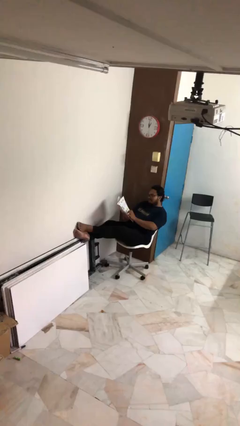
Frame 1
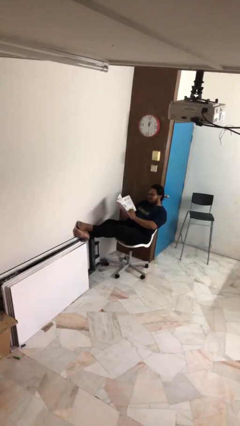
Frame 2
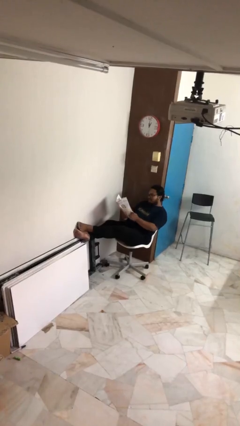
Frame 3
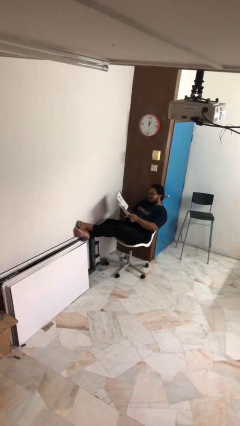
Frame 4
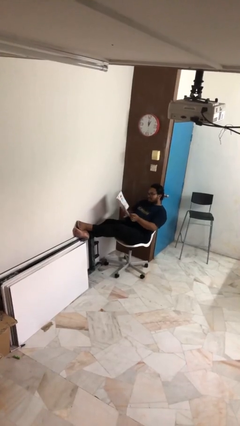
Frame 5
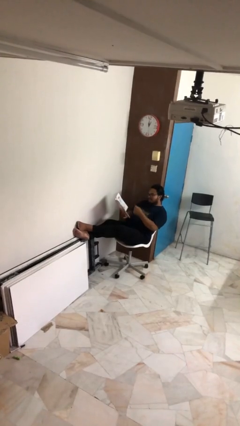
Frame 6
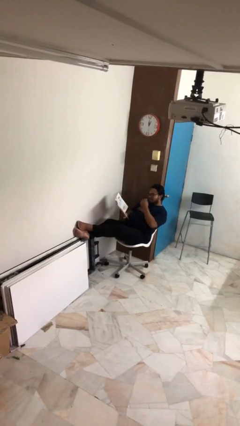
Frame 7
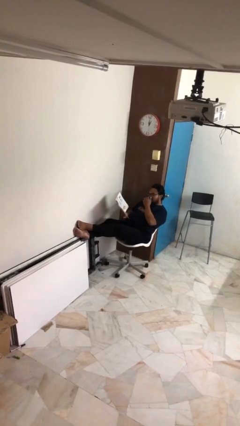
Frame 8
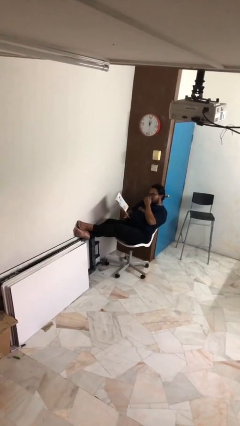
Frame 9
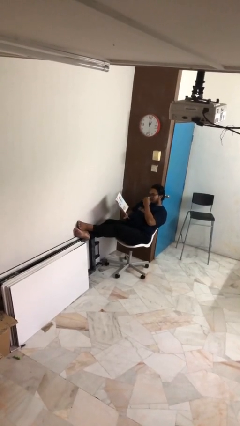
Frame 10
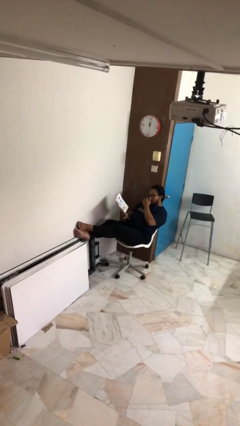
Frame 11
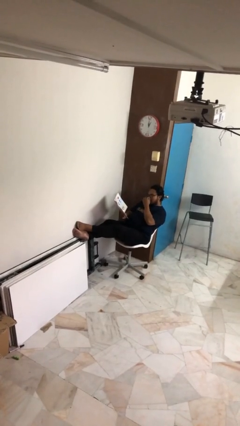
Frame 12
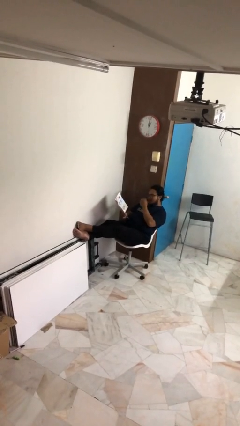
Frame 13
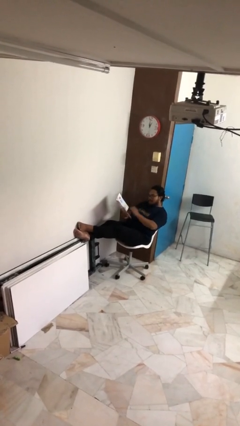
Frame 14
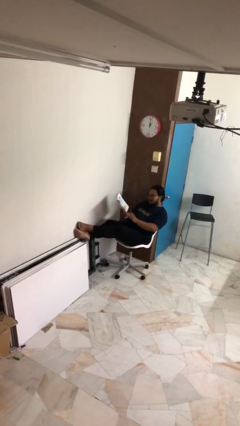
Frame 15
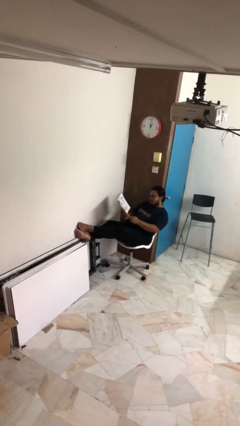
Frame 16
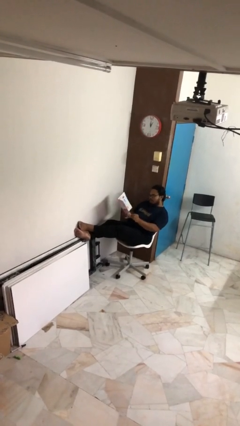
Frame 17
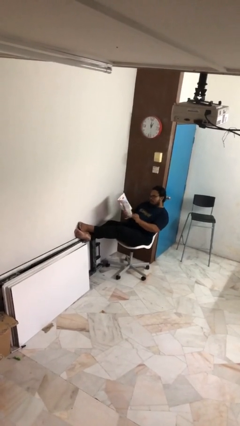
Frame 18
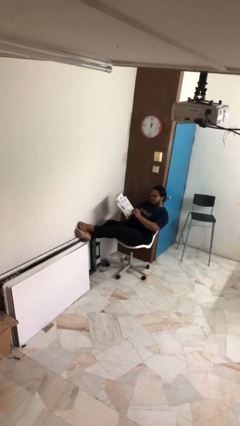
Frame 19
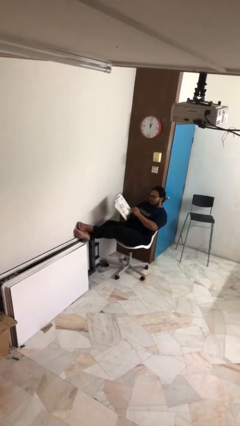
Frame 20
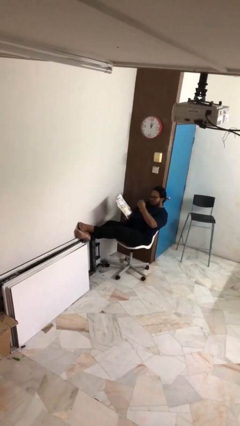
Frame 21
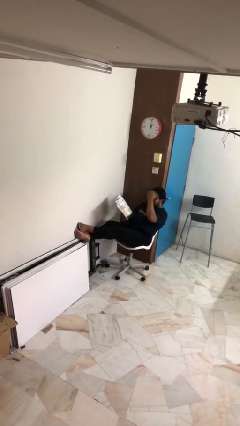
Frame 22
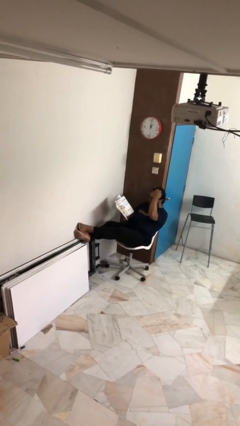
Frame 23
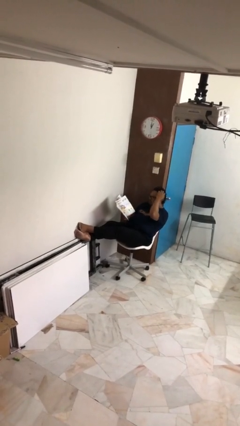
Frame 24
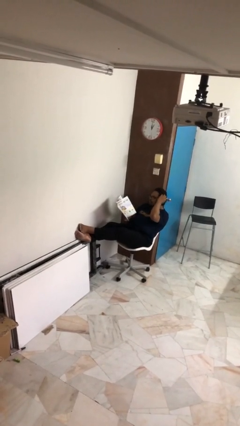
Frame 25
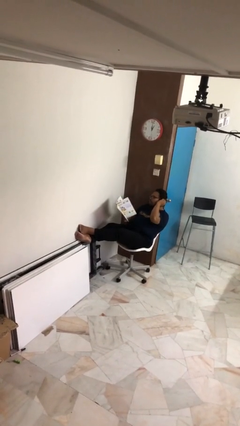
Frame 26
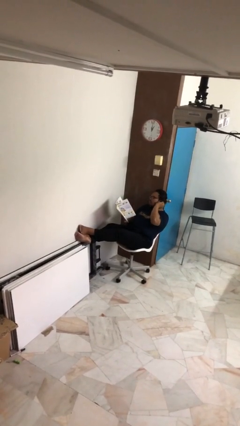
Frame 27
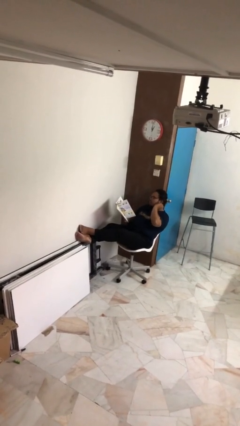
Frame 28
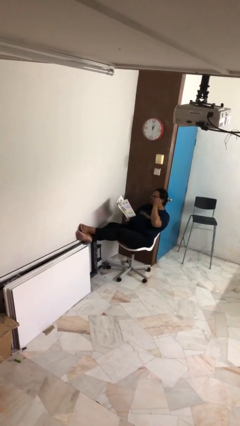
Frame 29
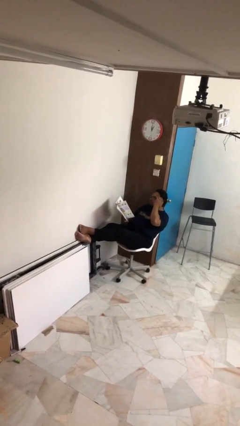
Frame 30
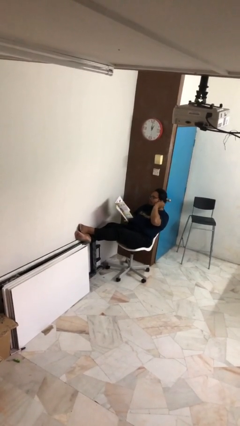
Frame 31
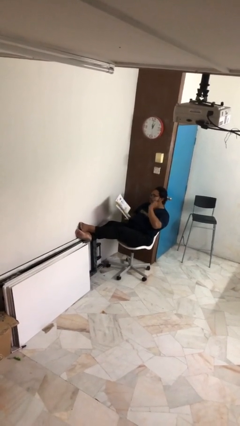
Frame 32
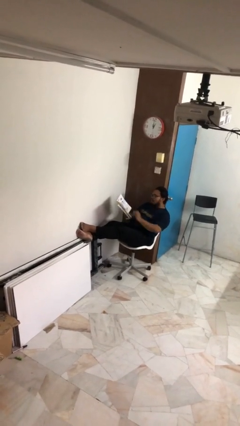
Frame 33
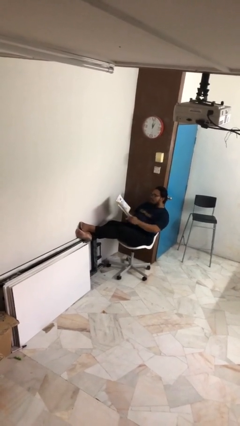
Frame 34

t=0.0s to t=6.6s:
person reads document

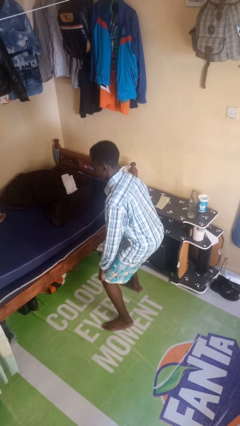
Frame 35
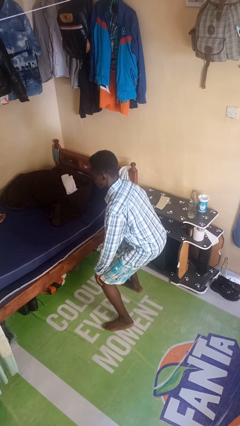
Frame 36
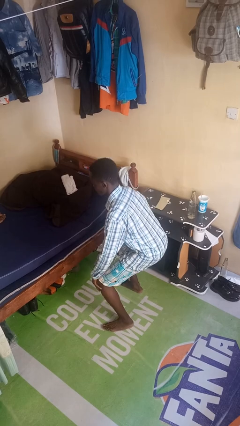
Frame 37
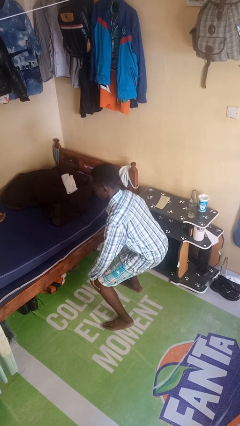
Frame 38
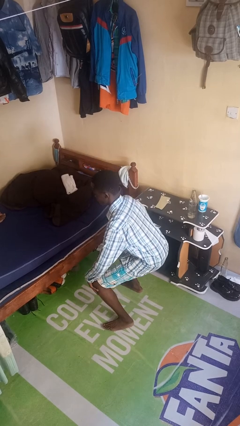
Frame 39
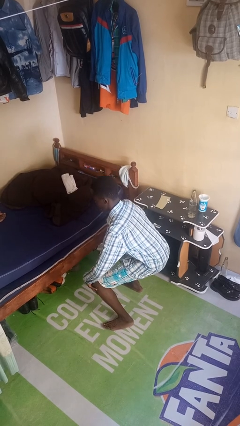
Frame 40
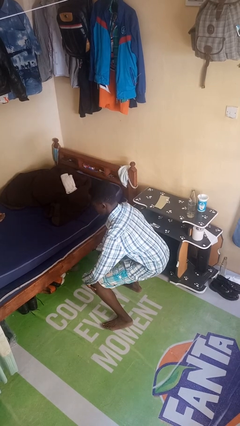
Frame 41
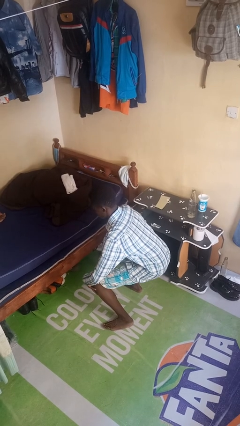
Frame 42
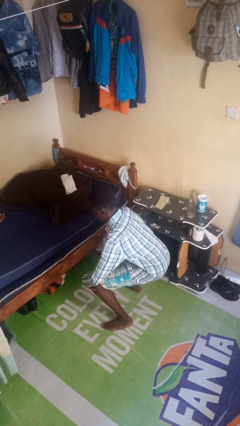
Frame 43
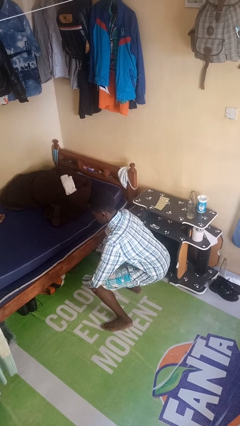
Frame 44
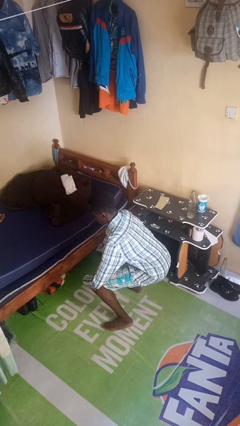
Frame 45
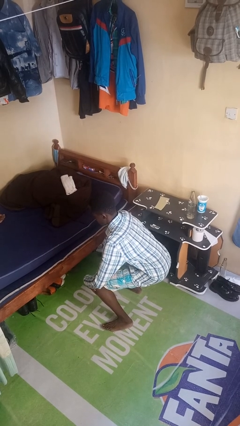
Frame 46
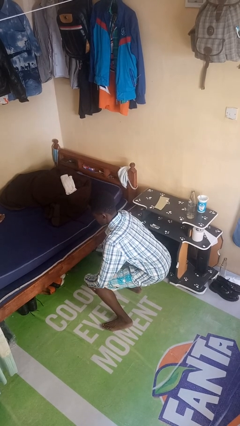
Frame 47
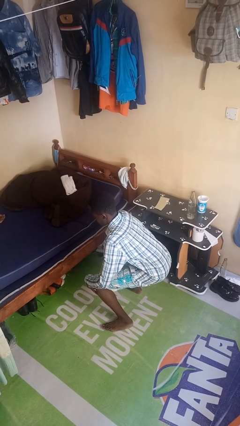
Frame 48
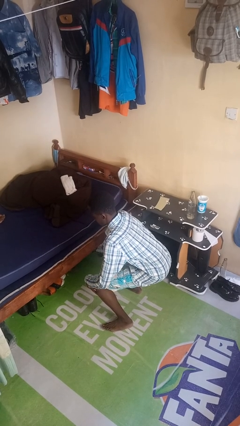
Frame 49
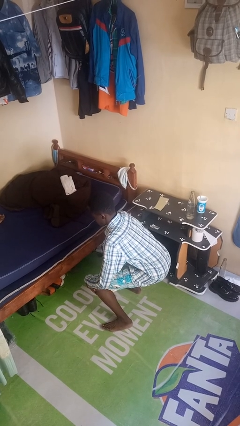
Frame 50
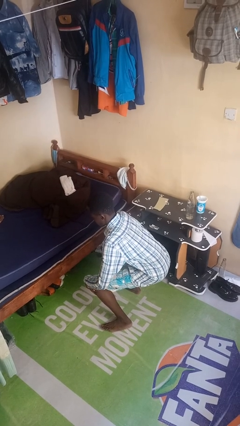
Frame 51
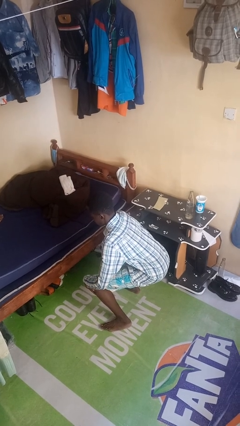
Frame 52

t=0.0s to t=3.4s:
person squats

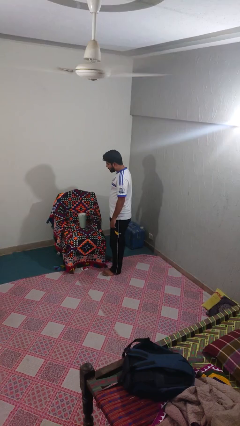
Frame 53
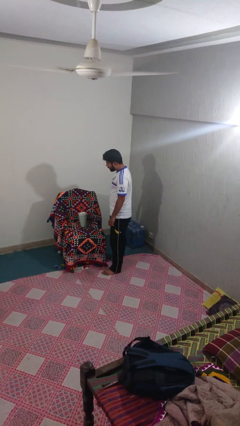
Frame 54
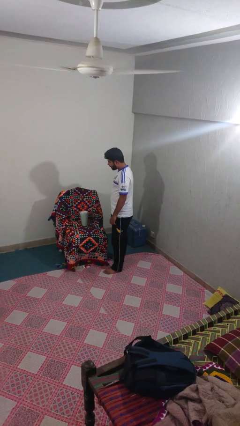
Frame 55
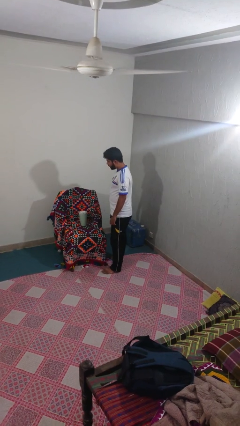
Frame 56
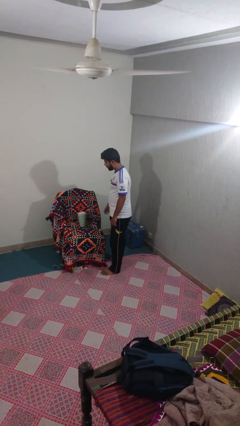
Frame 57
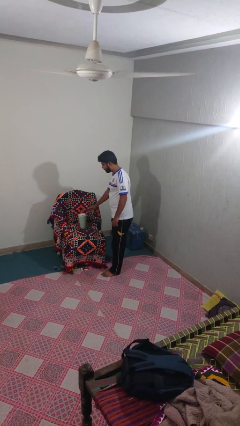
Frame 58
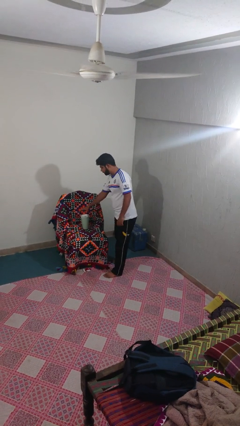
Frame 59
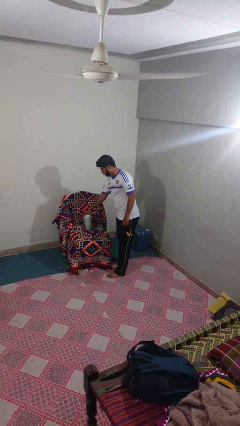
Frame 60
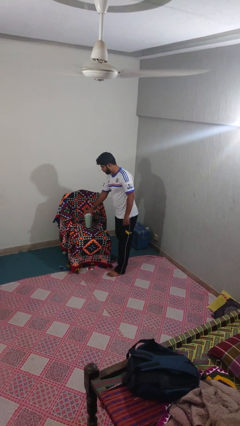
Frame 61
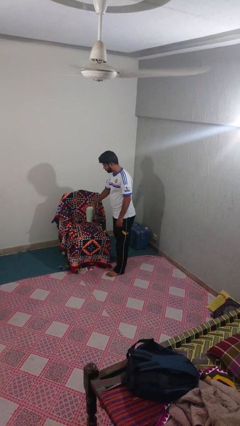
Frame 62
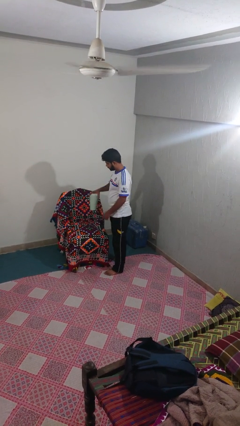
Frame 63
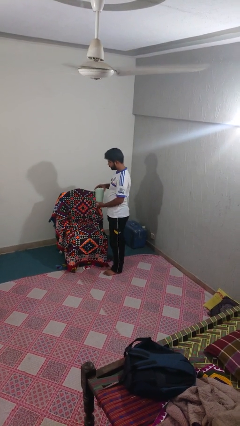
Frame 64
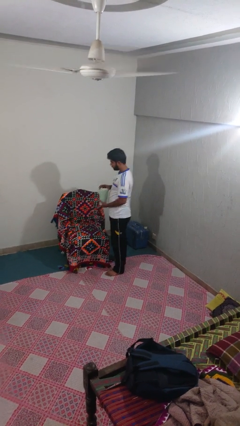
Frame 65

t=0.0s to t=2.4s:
person picks up object from couch

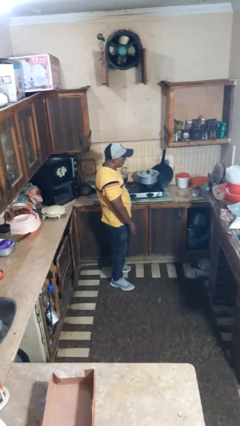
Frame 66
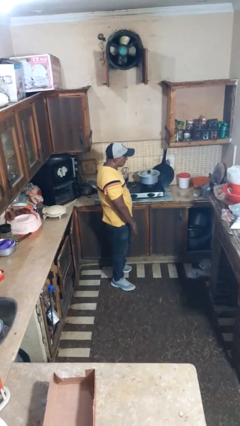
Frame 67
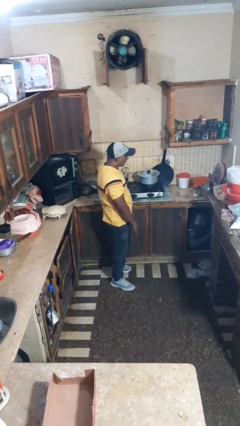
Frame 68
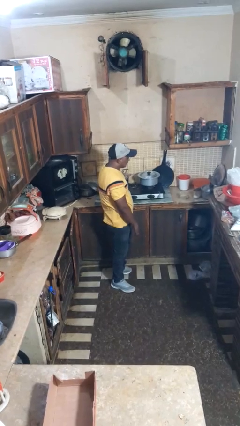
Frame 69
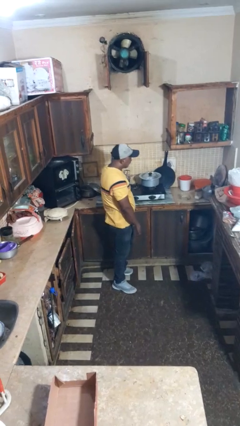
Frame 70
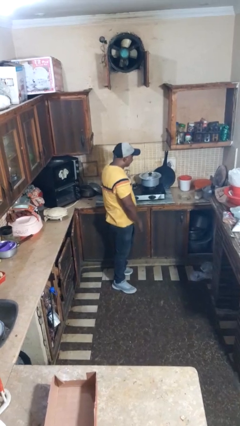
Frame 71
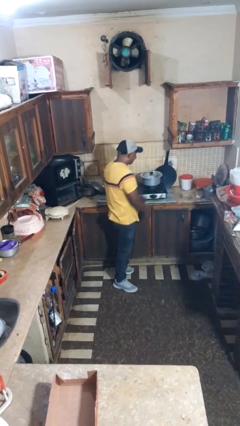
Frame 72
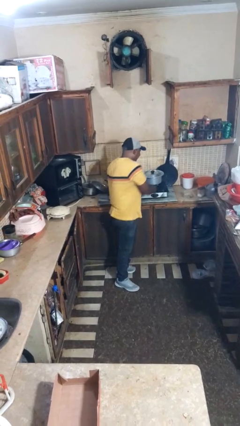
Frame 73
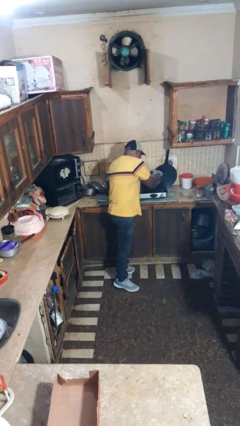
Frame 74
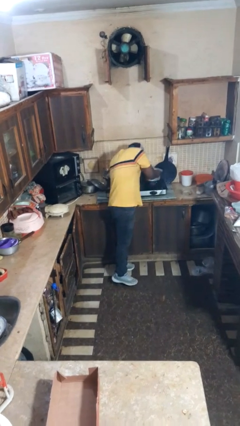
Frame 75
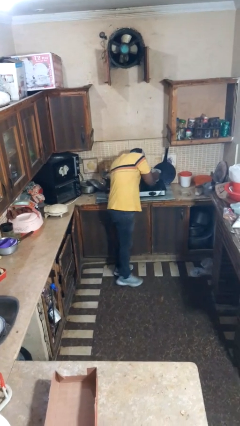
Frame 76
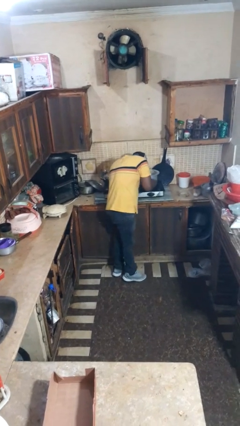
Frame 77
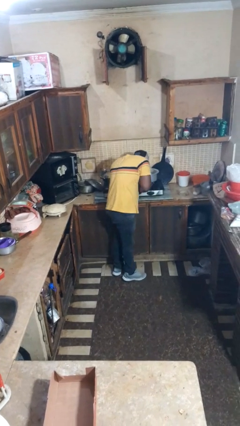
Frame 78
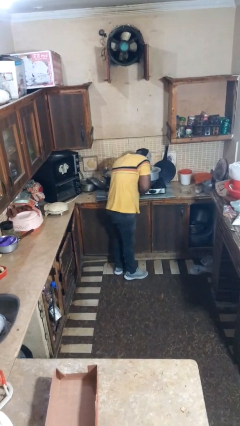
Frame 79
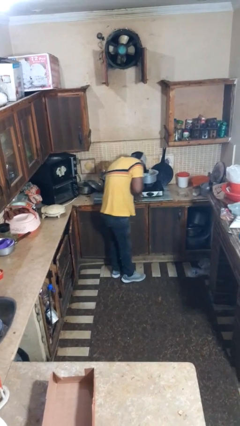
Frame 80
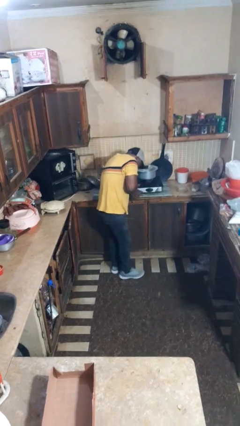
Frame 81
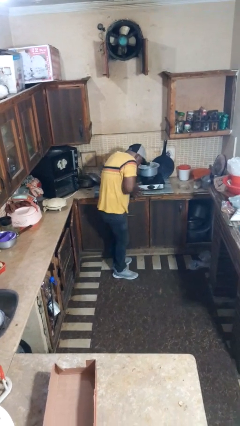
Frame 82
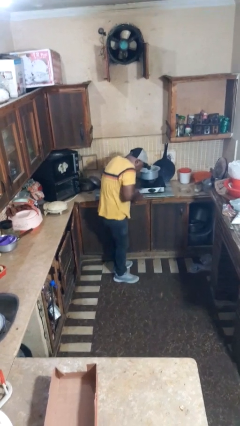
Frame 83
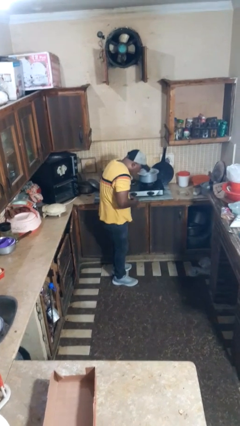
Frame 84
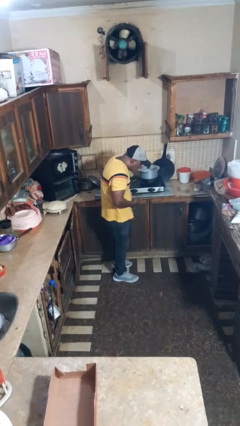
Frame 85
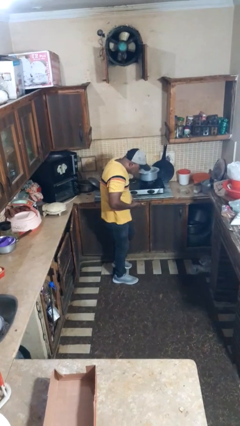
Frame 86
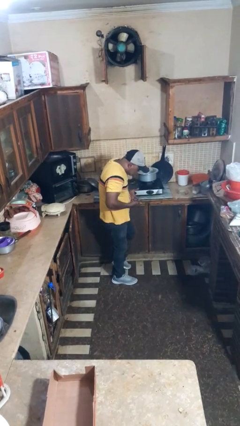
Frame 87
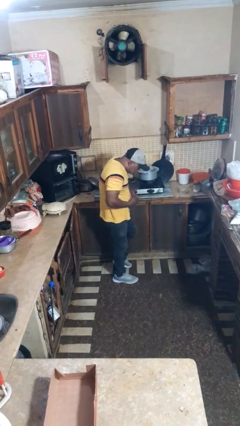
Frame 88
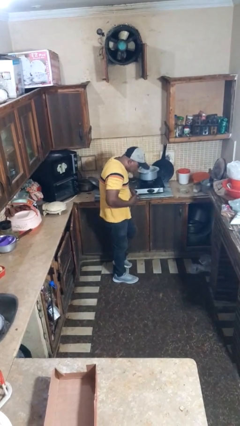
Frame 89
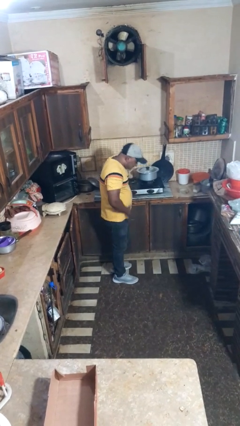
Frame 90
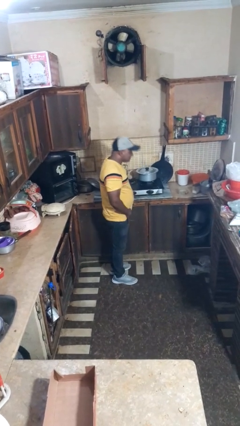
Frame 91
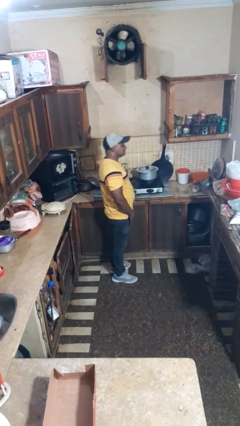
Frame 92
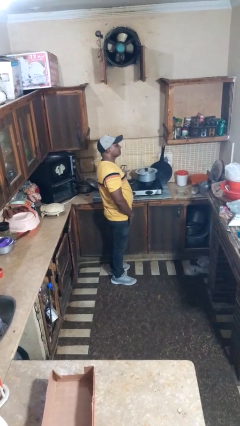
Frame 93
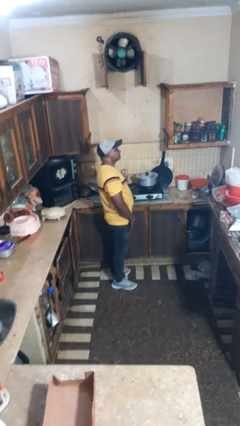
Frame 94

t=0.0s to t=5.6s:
person burns hand

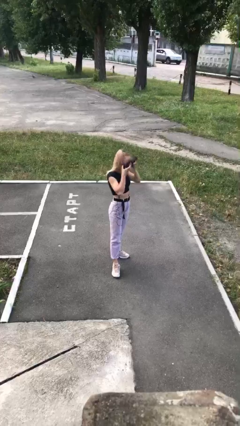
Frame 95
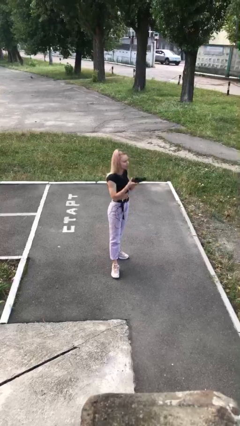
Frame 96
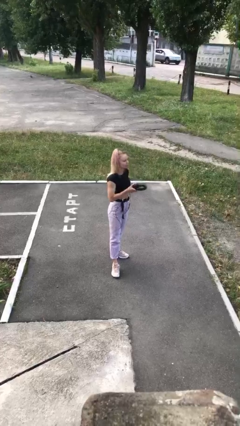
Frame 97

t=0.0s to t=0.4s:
person takes off headphones
